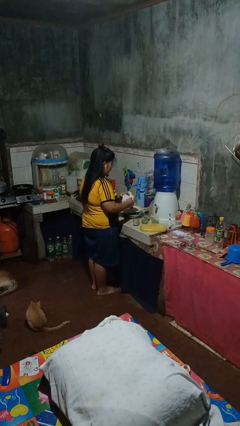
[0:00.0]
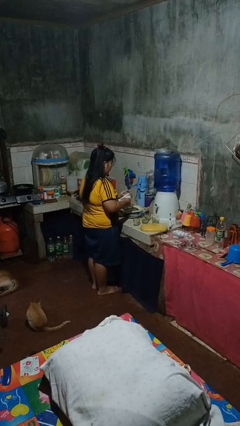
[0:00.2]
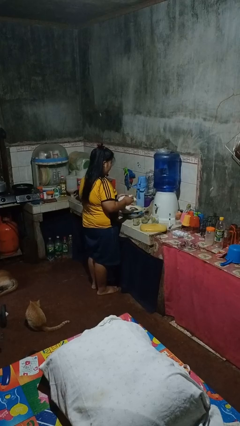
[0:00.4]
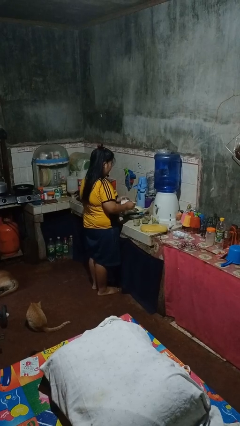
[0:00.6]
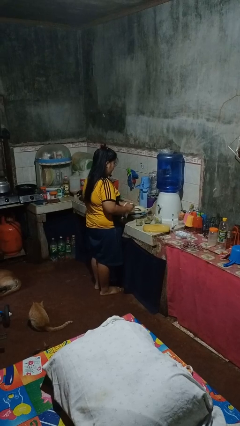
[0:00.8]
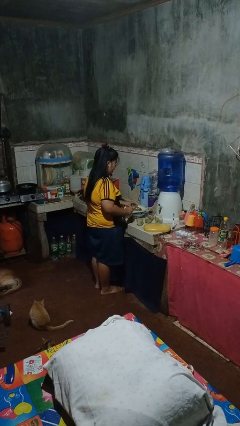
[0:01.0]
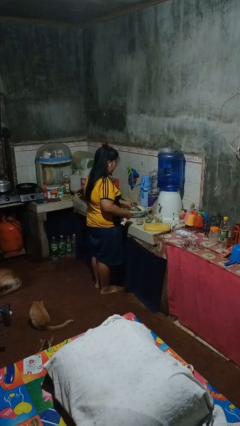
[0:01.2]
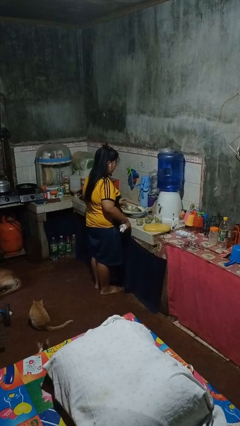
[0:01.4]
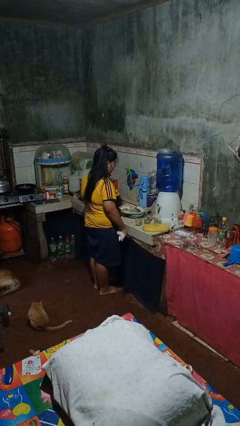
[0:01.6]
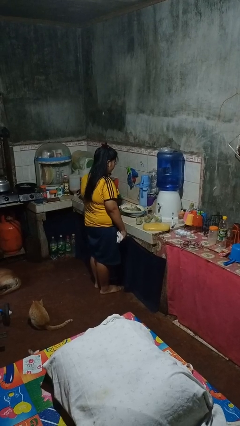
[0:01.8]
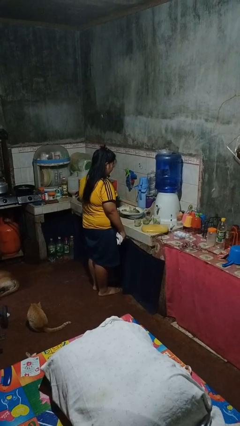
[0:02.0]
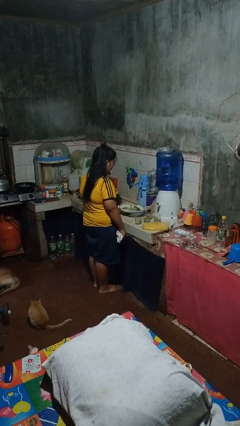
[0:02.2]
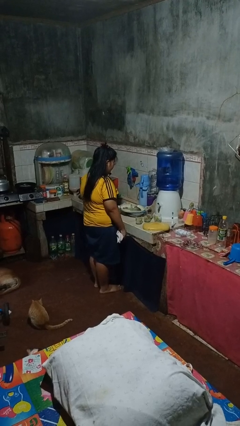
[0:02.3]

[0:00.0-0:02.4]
person dries dish

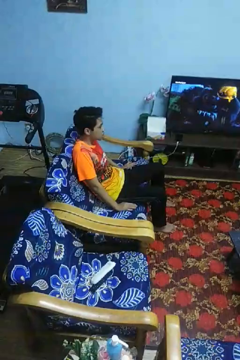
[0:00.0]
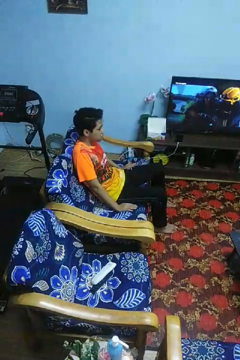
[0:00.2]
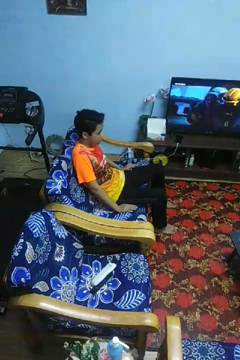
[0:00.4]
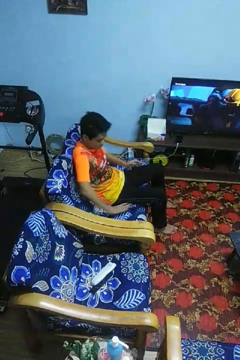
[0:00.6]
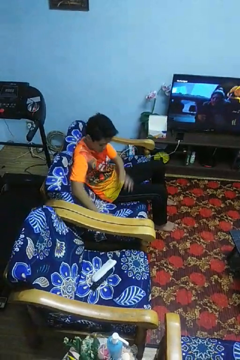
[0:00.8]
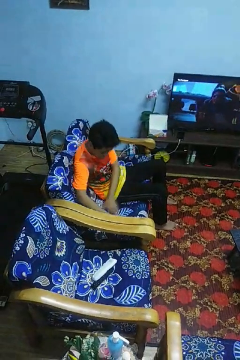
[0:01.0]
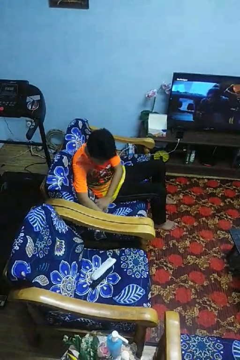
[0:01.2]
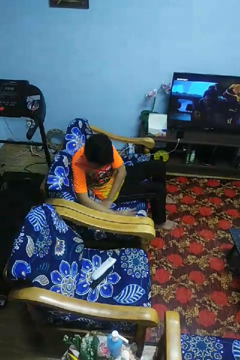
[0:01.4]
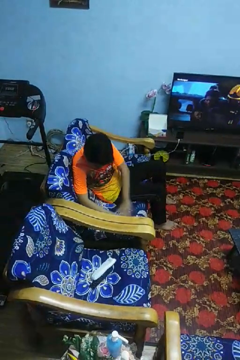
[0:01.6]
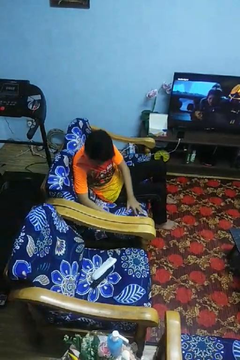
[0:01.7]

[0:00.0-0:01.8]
person searches in couch

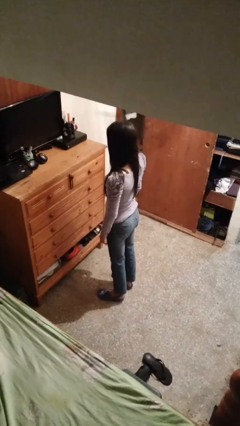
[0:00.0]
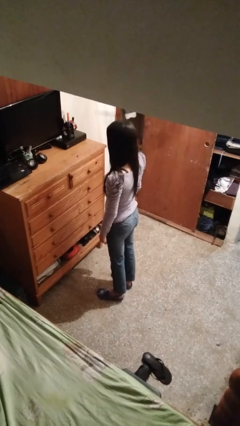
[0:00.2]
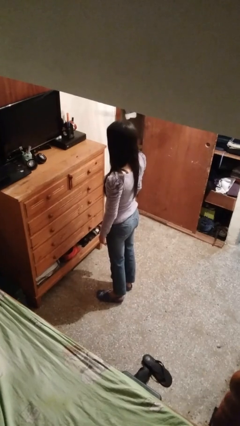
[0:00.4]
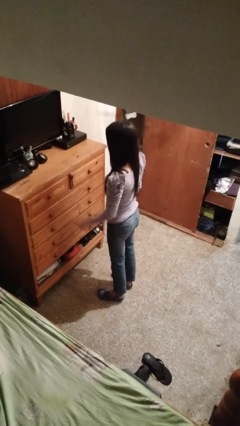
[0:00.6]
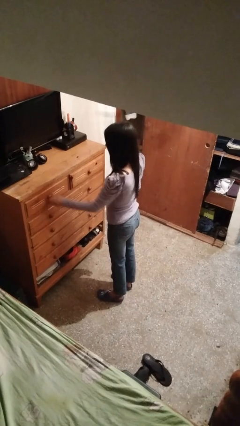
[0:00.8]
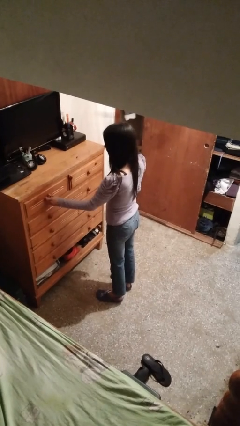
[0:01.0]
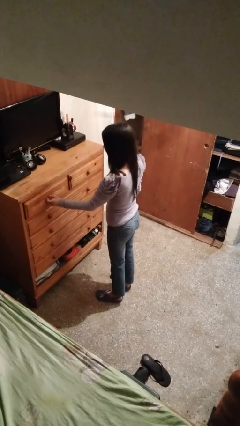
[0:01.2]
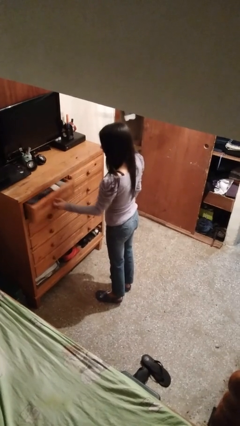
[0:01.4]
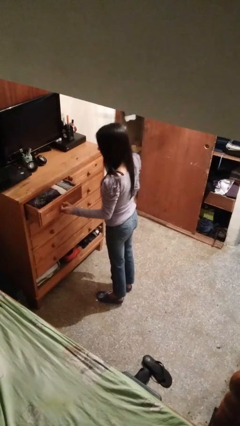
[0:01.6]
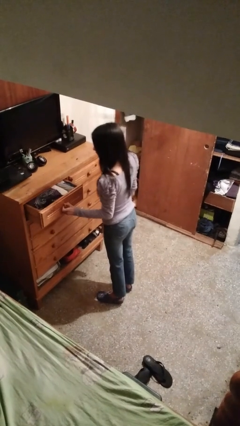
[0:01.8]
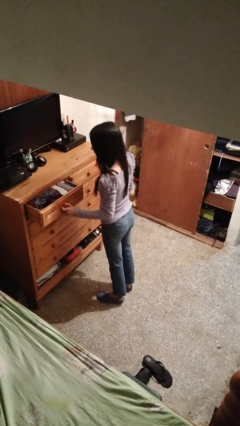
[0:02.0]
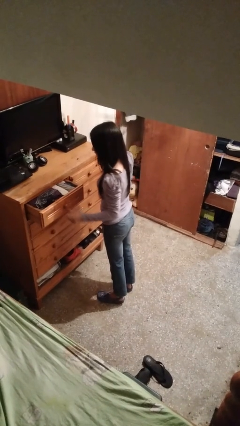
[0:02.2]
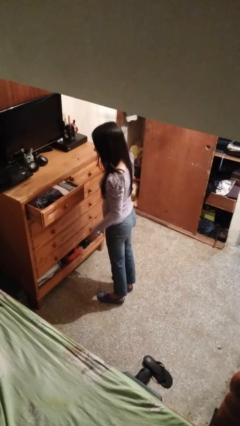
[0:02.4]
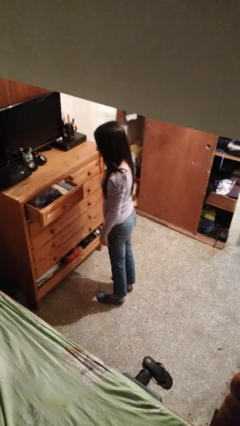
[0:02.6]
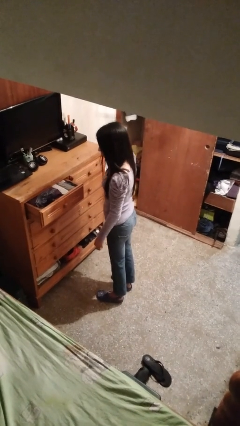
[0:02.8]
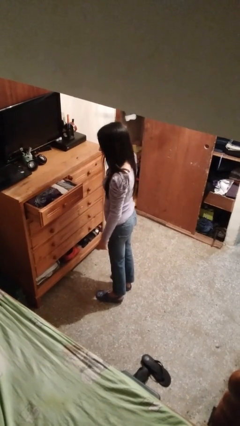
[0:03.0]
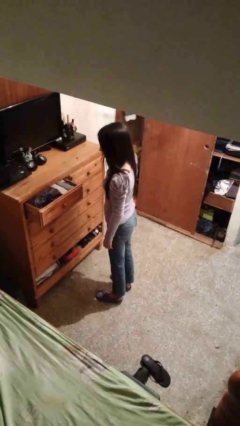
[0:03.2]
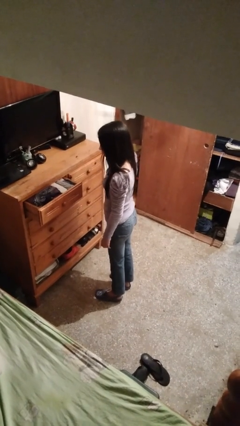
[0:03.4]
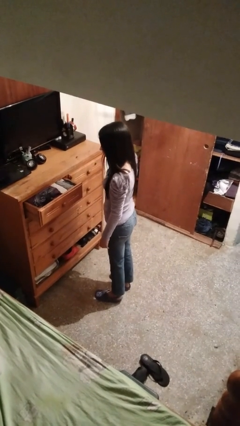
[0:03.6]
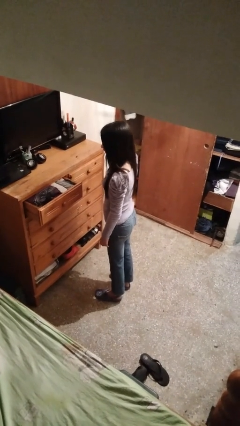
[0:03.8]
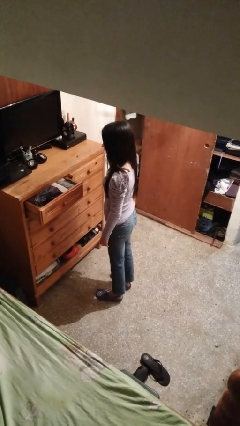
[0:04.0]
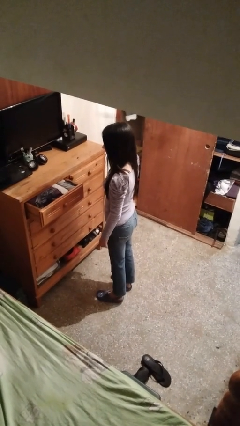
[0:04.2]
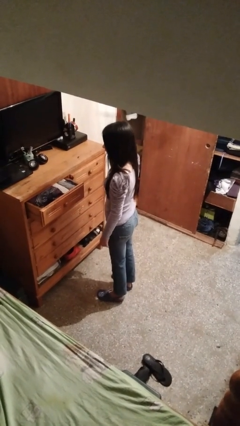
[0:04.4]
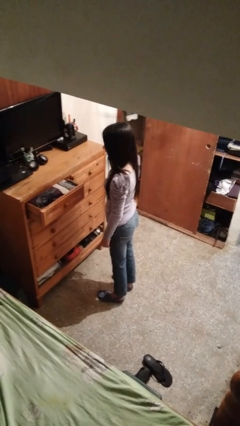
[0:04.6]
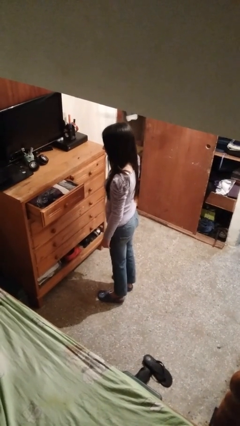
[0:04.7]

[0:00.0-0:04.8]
person opens dresser drawer

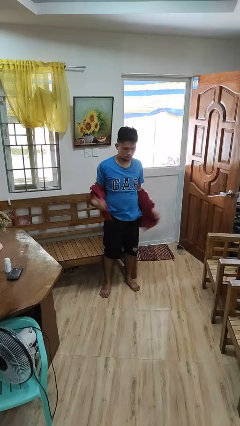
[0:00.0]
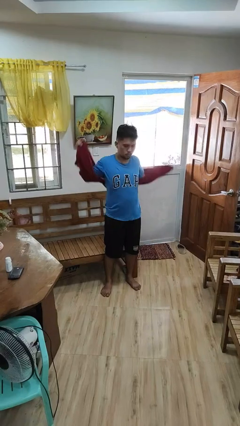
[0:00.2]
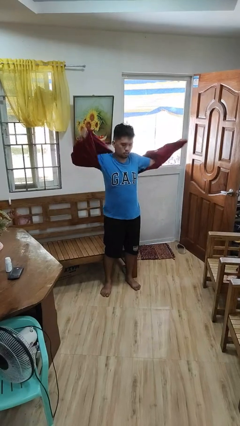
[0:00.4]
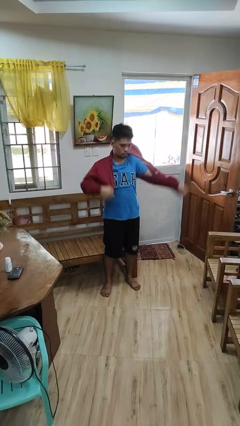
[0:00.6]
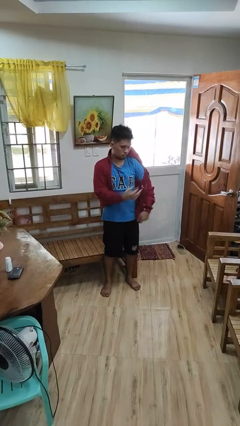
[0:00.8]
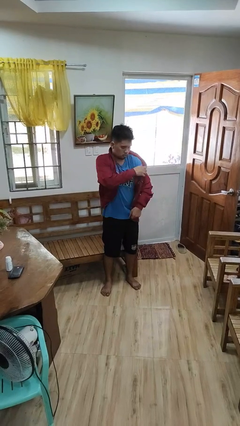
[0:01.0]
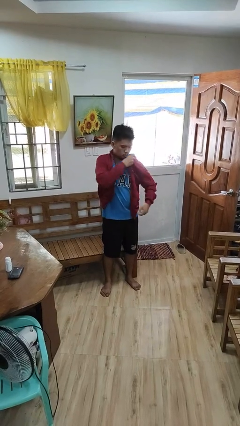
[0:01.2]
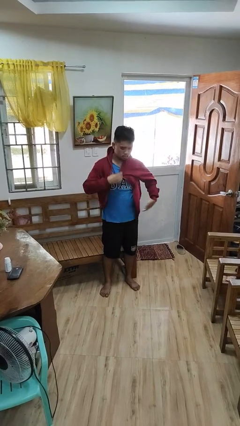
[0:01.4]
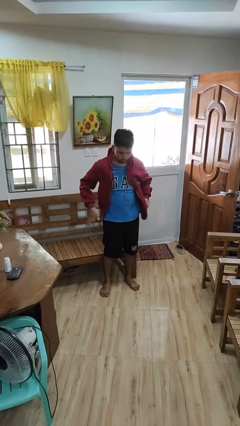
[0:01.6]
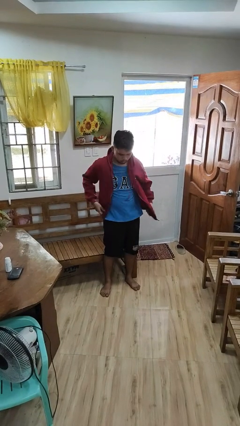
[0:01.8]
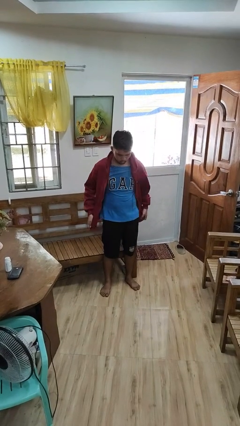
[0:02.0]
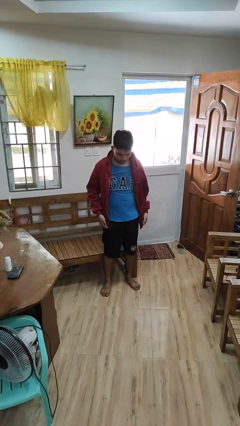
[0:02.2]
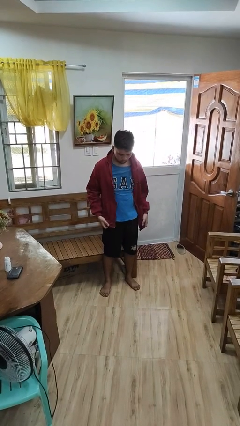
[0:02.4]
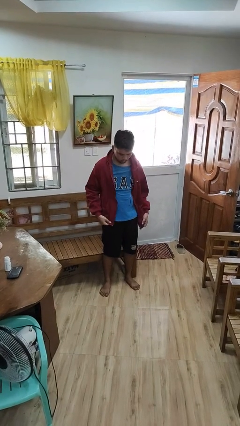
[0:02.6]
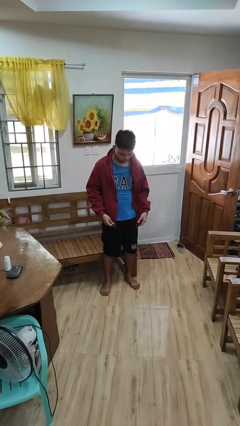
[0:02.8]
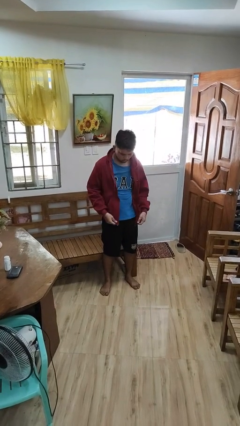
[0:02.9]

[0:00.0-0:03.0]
person puts on jacket

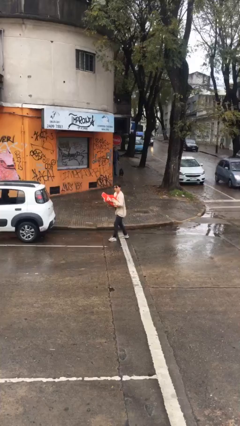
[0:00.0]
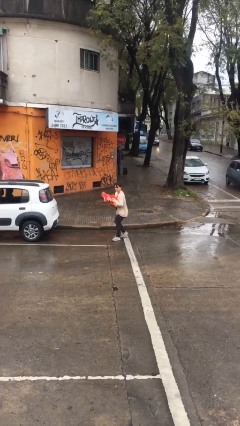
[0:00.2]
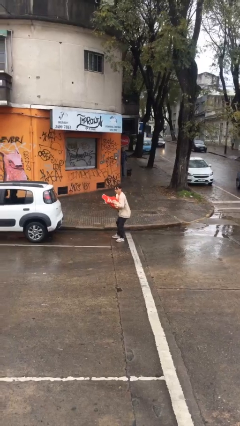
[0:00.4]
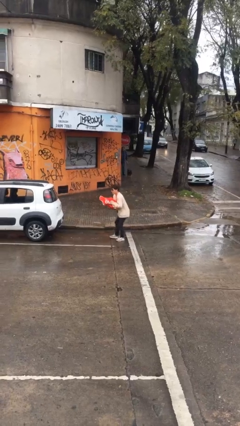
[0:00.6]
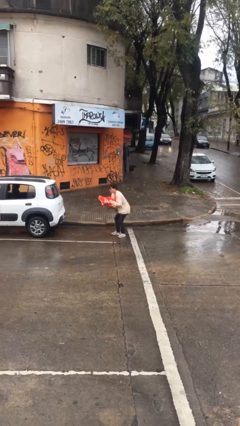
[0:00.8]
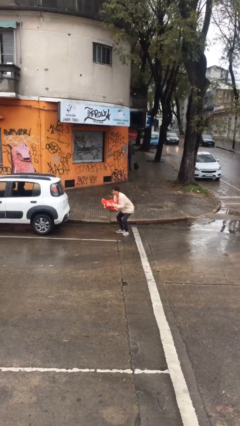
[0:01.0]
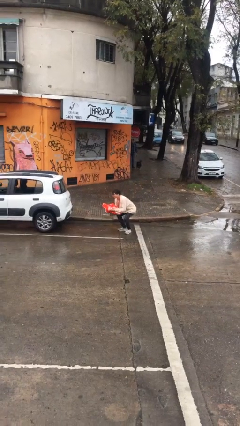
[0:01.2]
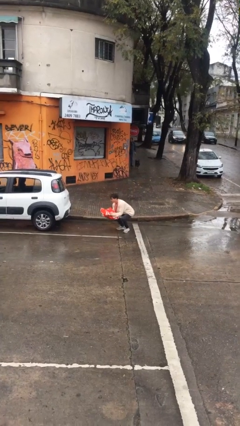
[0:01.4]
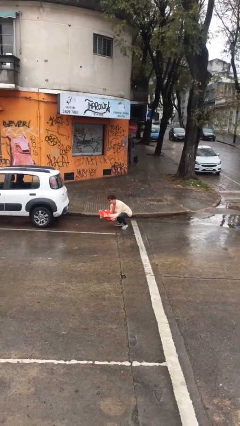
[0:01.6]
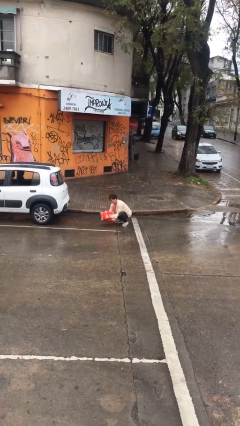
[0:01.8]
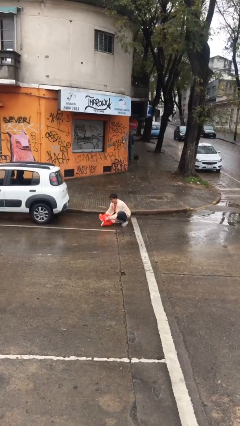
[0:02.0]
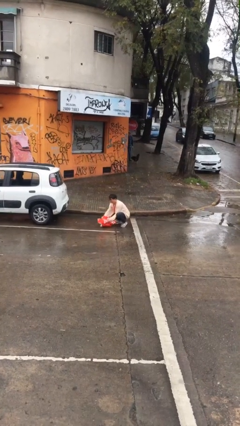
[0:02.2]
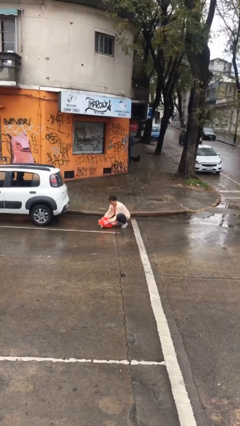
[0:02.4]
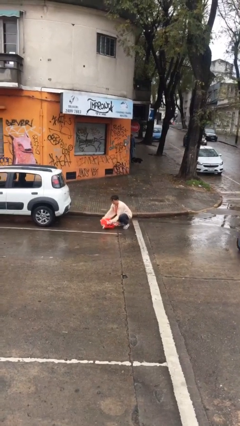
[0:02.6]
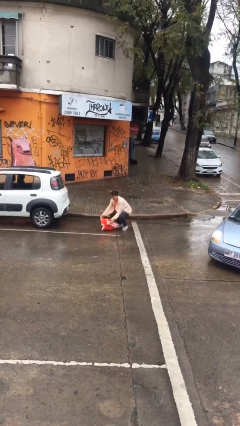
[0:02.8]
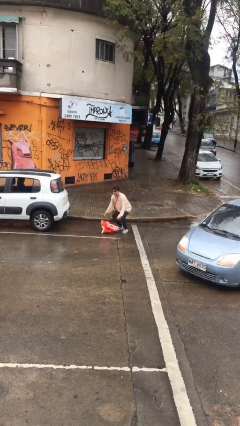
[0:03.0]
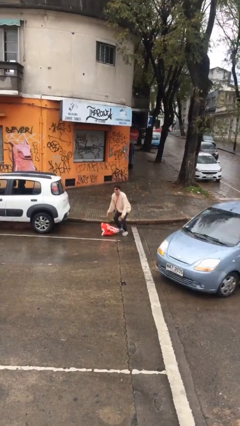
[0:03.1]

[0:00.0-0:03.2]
person puts down object on floor

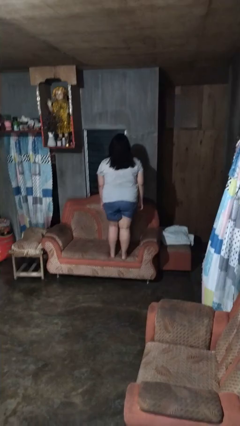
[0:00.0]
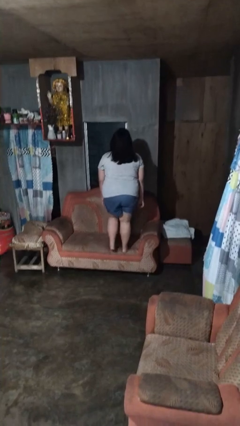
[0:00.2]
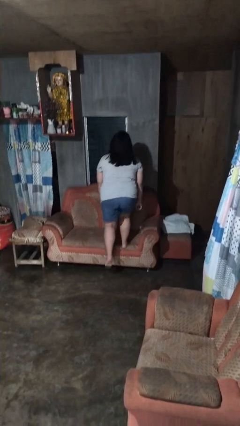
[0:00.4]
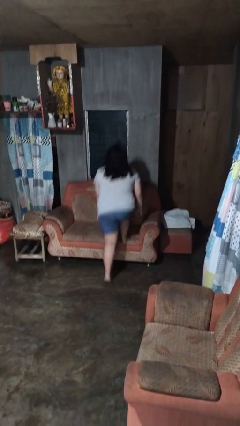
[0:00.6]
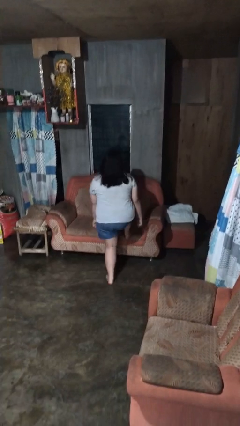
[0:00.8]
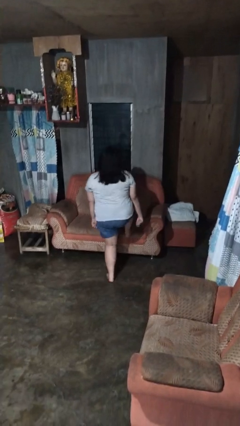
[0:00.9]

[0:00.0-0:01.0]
person climbs off couch

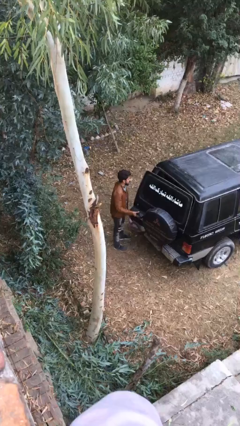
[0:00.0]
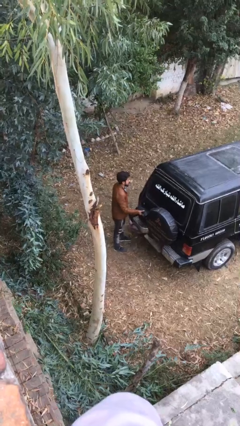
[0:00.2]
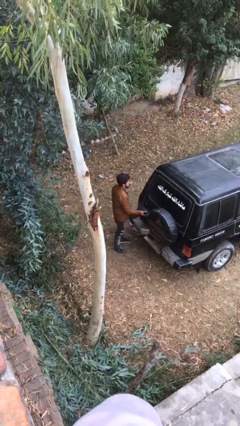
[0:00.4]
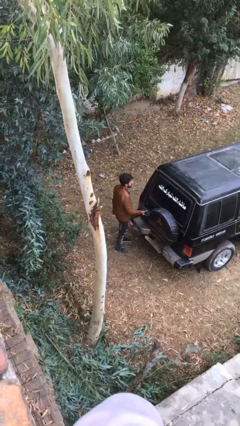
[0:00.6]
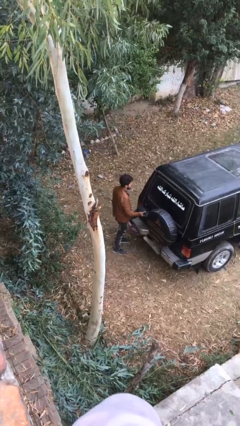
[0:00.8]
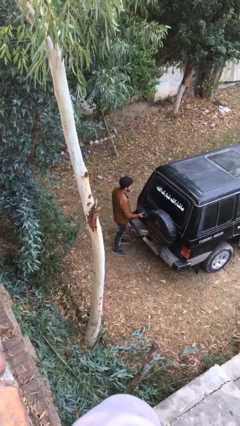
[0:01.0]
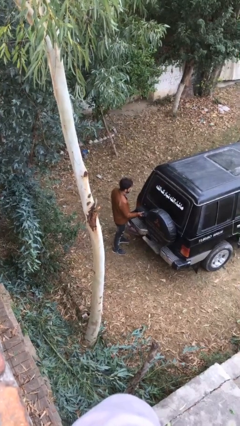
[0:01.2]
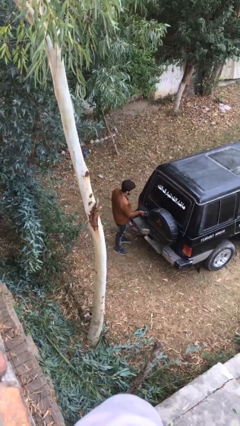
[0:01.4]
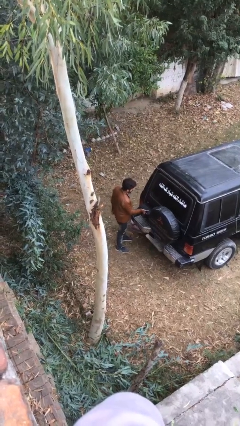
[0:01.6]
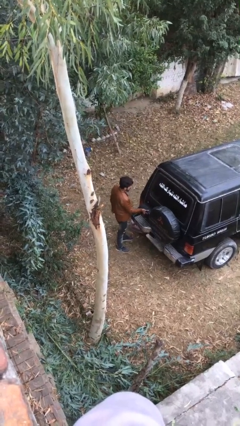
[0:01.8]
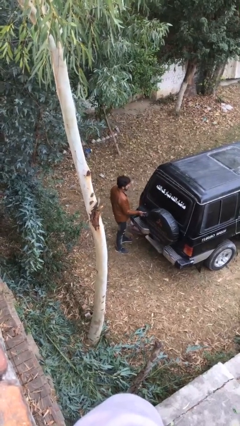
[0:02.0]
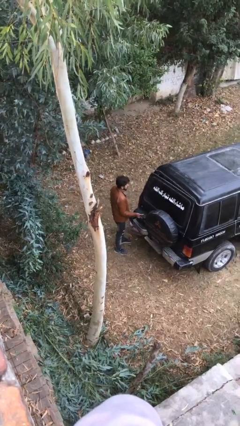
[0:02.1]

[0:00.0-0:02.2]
person closes car trunk
